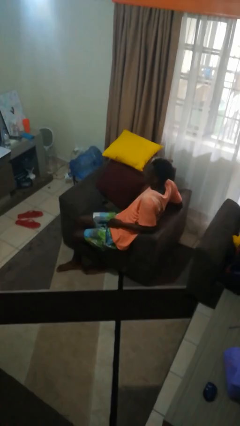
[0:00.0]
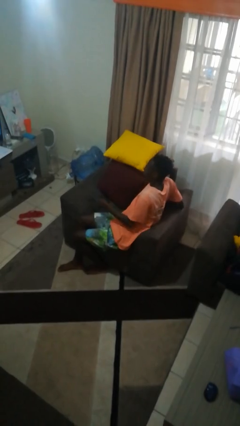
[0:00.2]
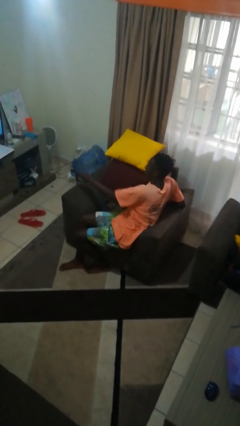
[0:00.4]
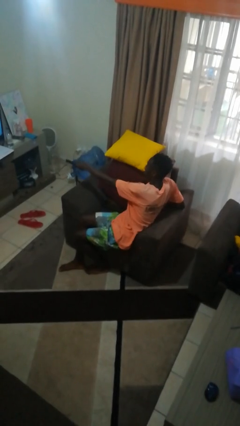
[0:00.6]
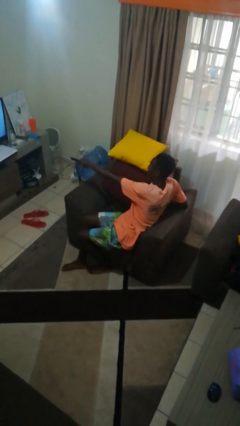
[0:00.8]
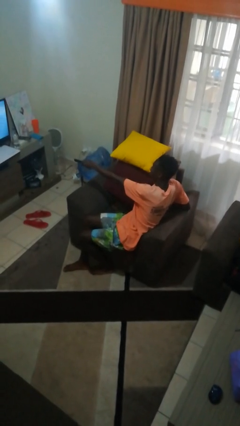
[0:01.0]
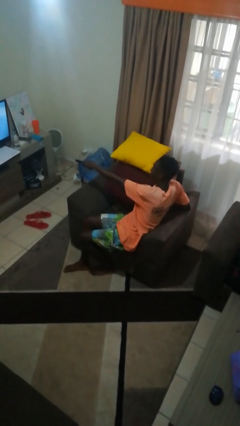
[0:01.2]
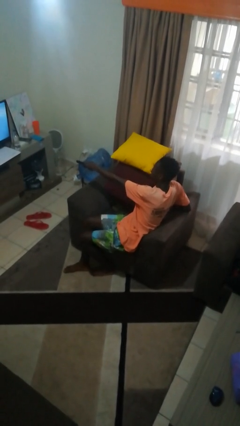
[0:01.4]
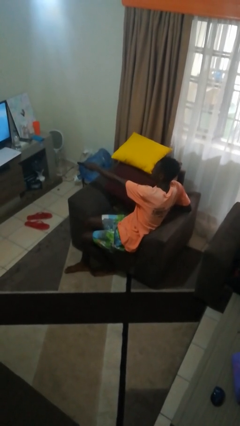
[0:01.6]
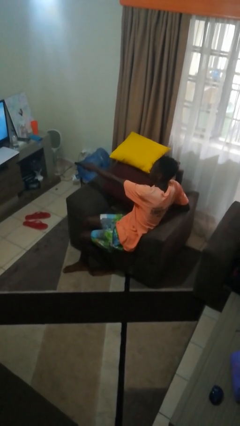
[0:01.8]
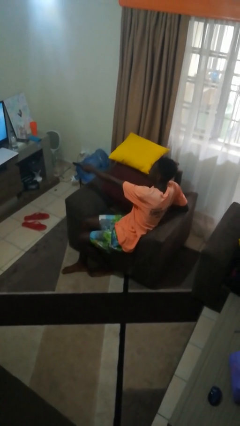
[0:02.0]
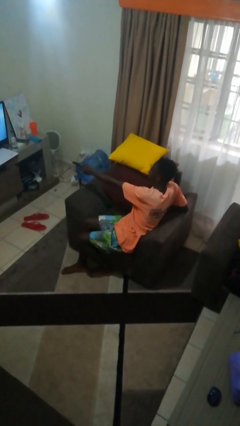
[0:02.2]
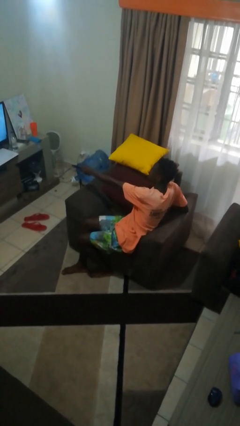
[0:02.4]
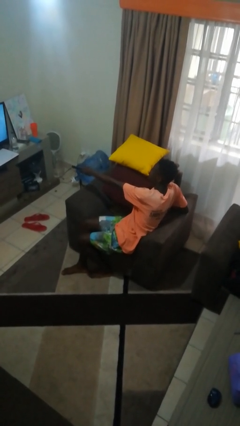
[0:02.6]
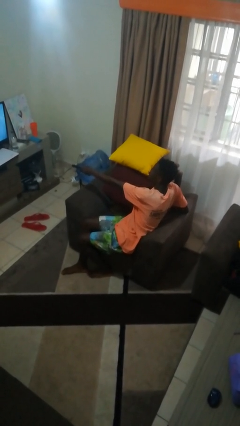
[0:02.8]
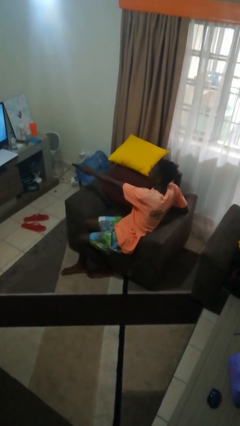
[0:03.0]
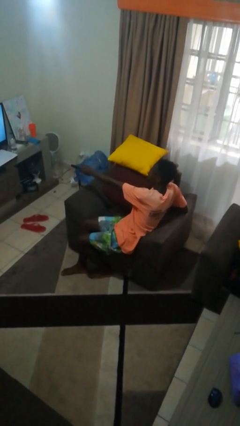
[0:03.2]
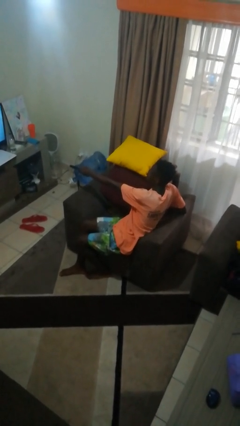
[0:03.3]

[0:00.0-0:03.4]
person uses television remote

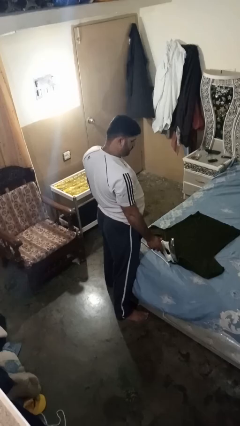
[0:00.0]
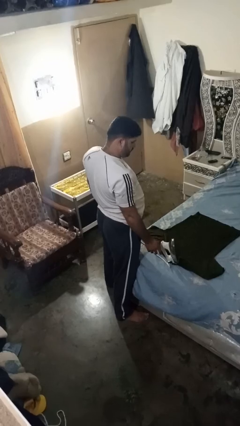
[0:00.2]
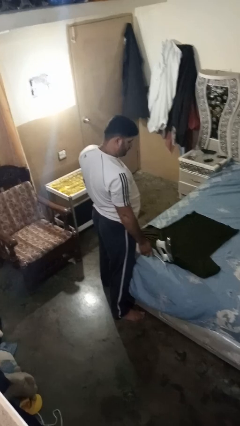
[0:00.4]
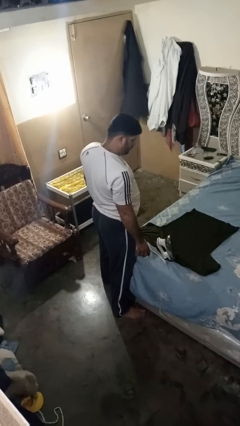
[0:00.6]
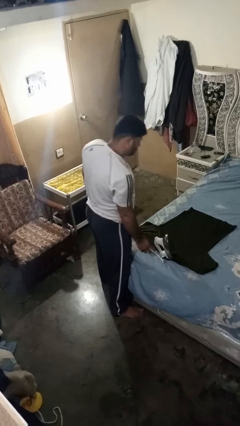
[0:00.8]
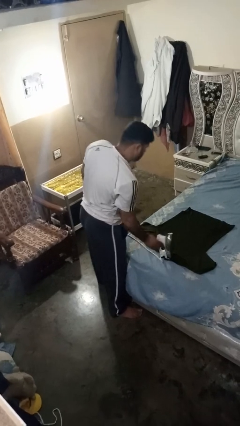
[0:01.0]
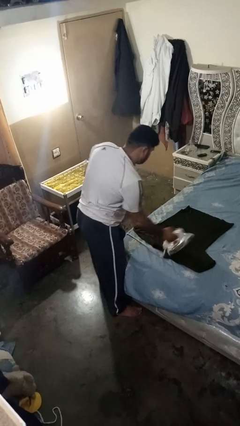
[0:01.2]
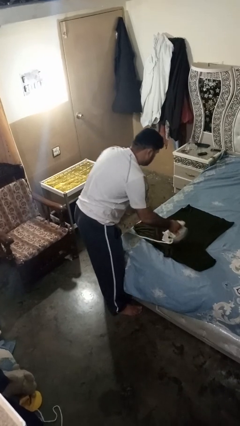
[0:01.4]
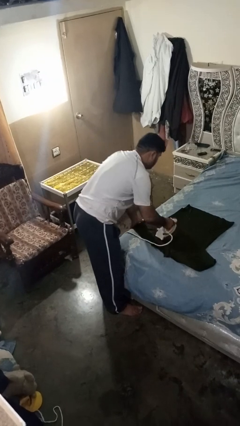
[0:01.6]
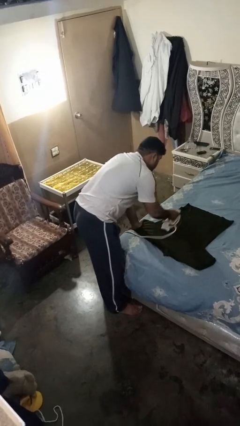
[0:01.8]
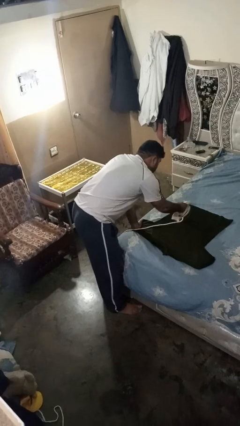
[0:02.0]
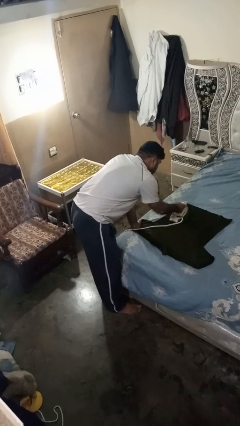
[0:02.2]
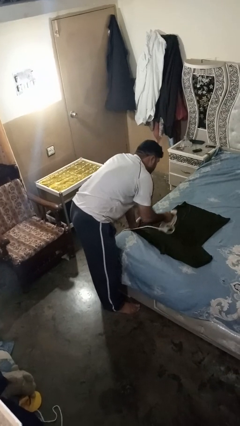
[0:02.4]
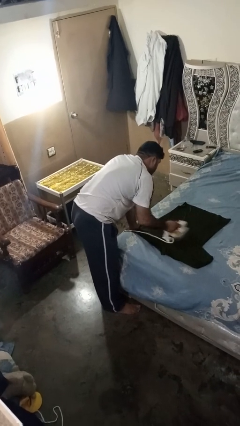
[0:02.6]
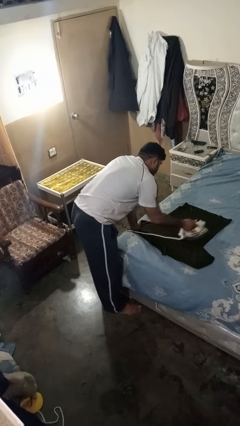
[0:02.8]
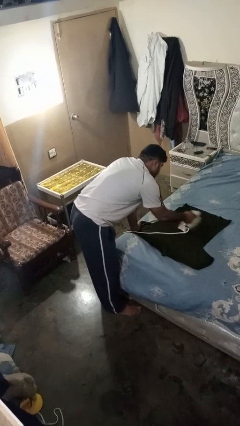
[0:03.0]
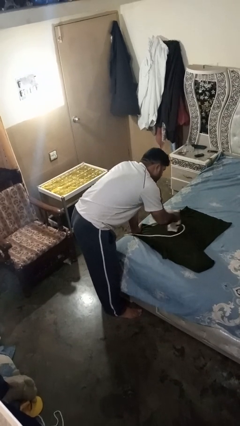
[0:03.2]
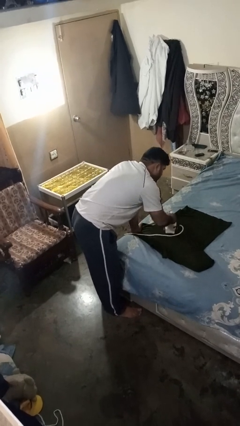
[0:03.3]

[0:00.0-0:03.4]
person irons clothes

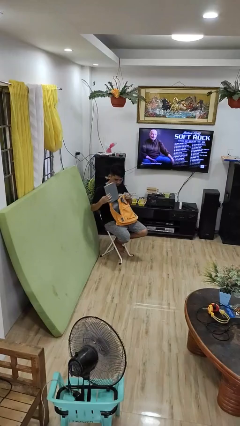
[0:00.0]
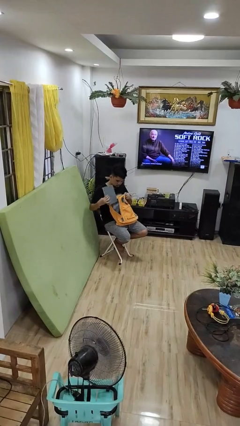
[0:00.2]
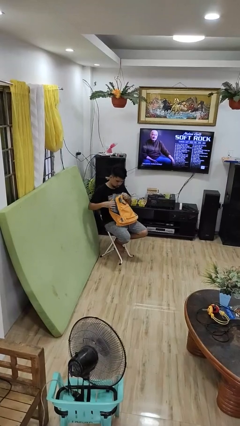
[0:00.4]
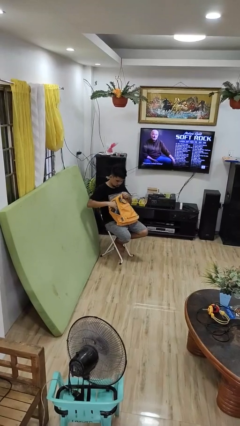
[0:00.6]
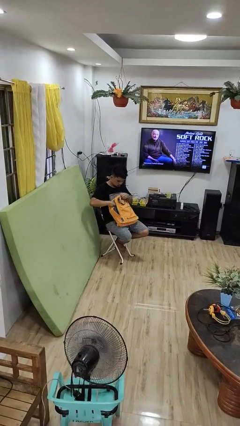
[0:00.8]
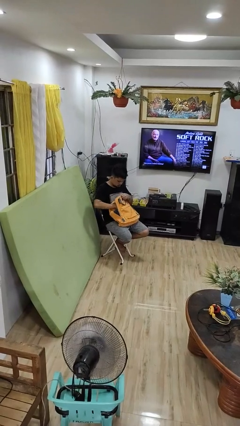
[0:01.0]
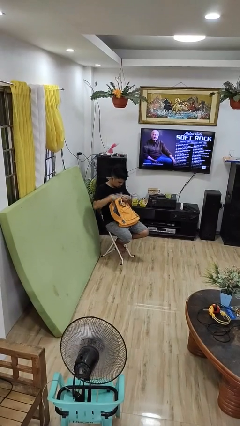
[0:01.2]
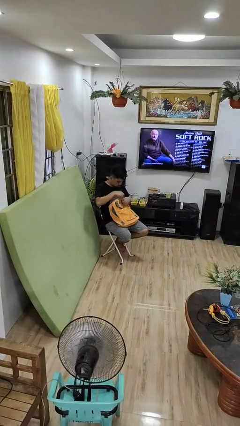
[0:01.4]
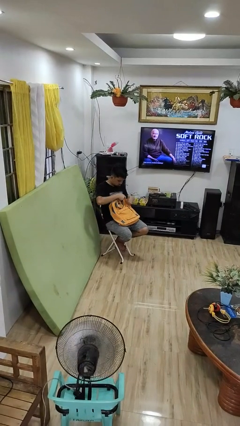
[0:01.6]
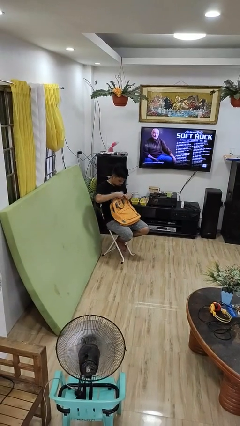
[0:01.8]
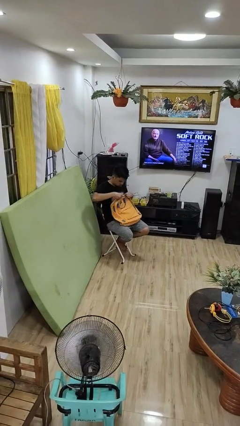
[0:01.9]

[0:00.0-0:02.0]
person puts object into backpack

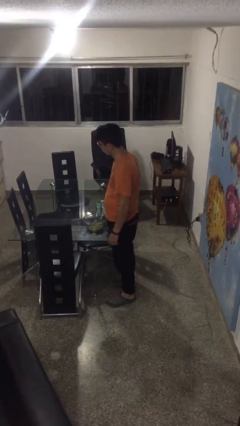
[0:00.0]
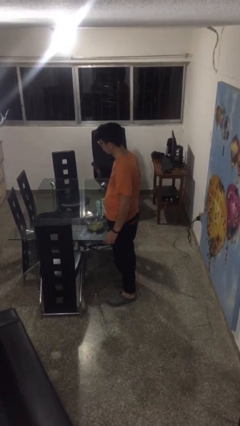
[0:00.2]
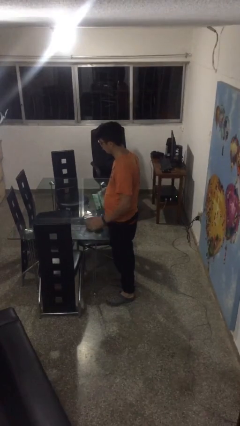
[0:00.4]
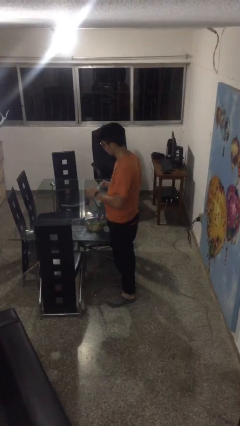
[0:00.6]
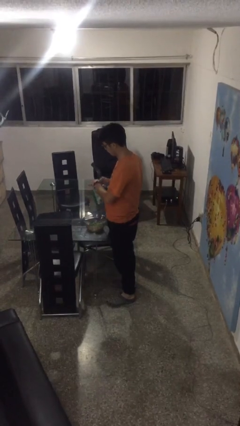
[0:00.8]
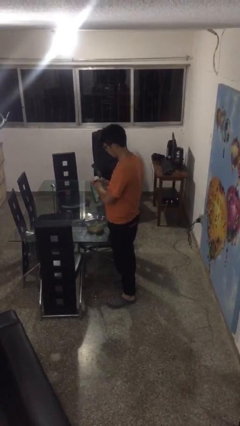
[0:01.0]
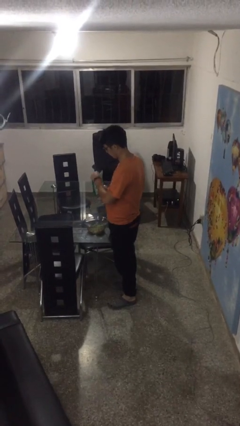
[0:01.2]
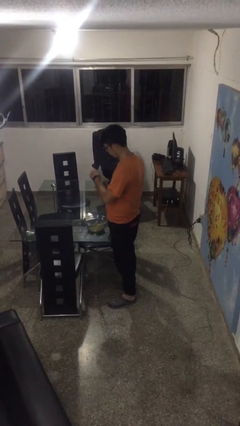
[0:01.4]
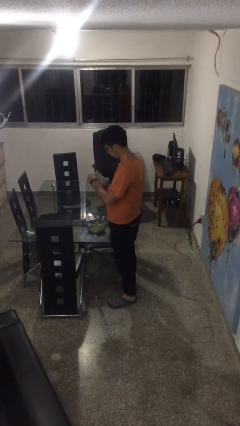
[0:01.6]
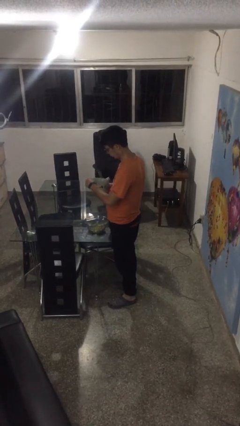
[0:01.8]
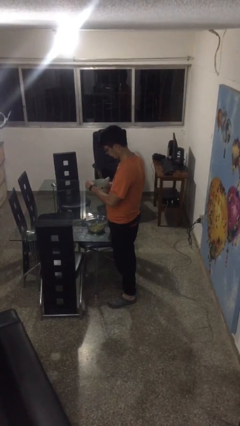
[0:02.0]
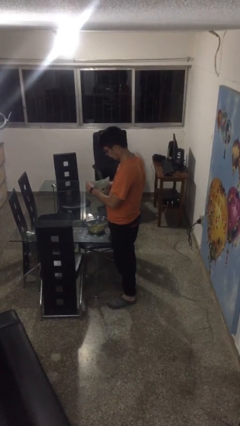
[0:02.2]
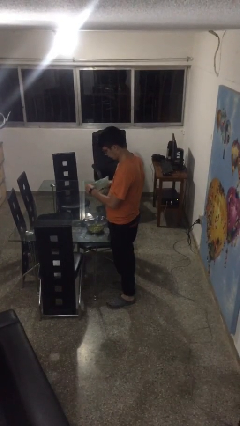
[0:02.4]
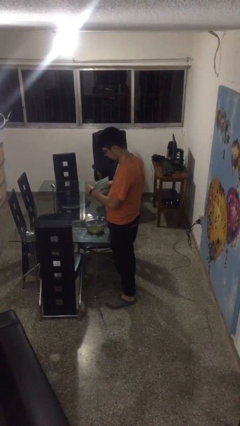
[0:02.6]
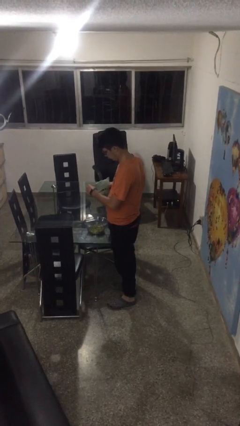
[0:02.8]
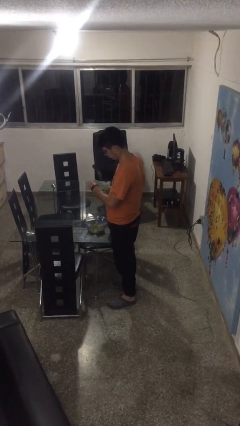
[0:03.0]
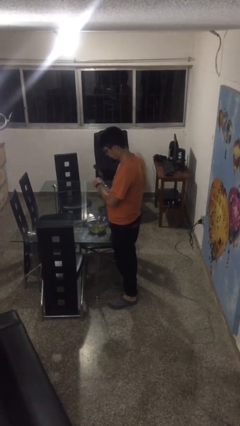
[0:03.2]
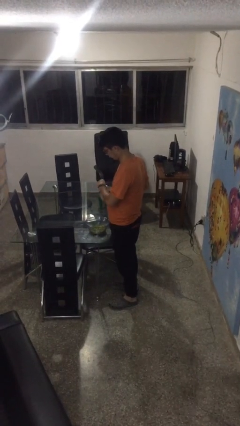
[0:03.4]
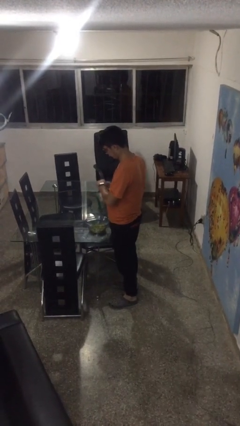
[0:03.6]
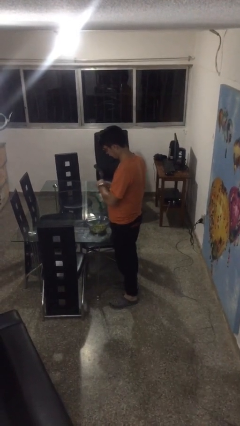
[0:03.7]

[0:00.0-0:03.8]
person pours into bowl

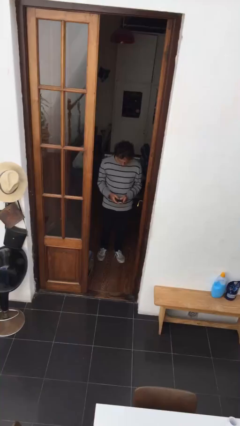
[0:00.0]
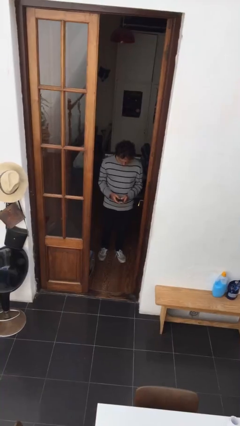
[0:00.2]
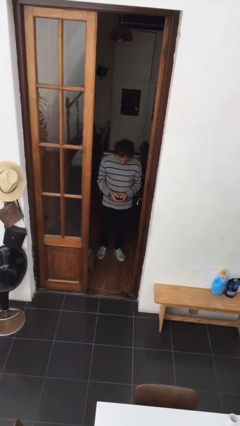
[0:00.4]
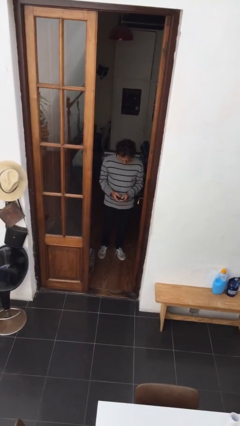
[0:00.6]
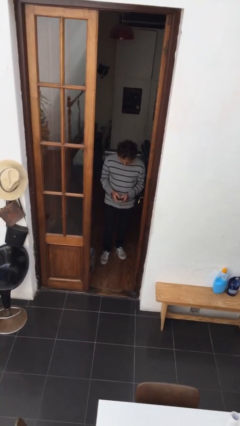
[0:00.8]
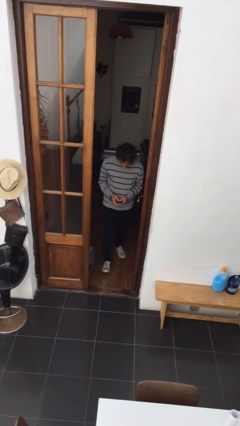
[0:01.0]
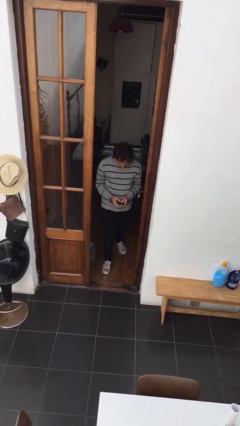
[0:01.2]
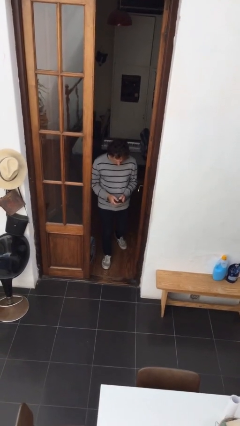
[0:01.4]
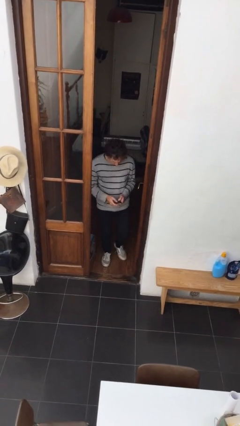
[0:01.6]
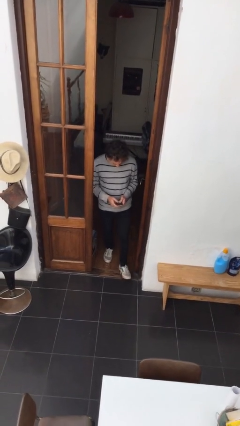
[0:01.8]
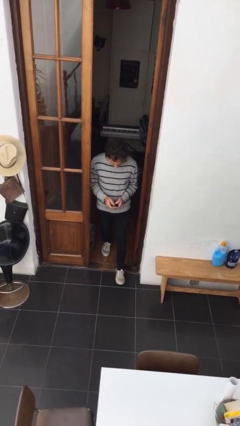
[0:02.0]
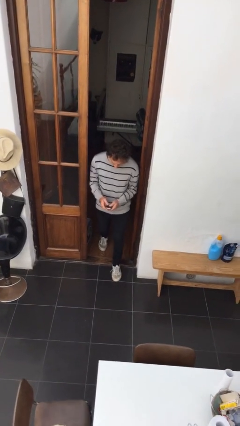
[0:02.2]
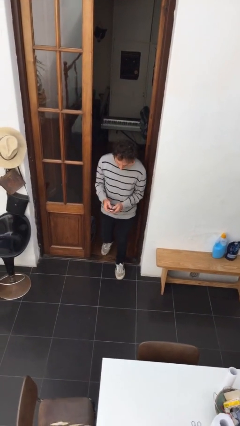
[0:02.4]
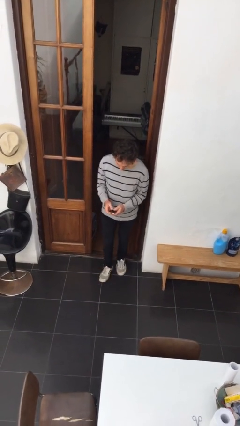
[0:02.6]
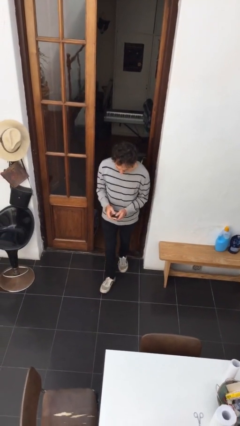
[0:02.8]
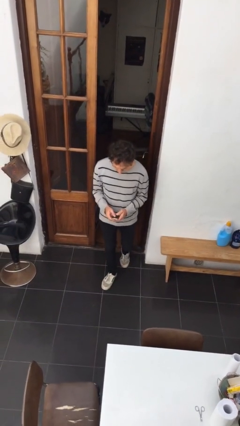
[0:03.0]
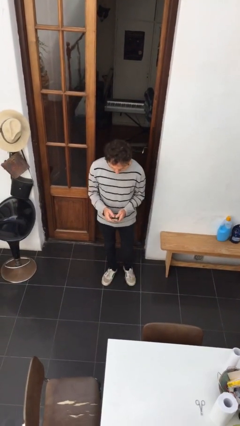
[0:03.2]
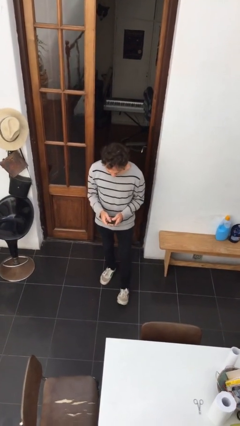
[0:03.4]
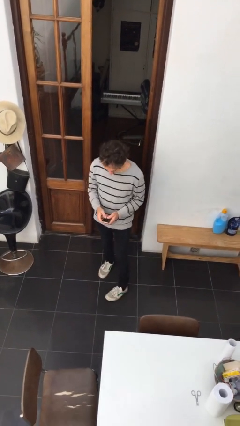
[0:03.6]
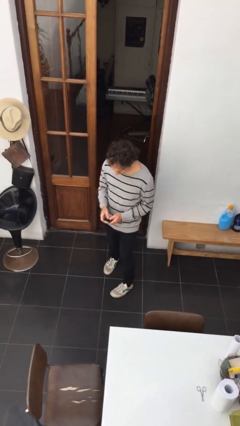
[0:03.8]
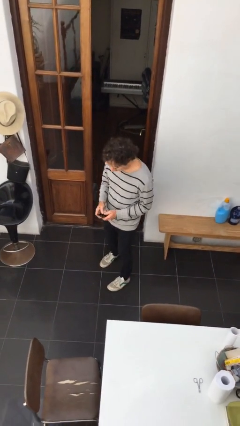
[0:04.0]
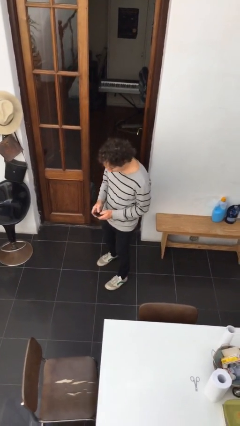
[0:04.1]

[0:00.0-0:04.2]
person enters scene through structure

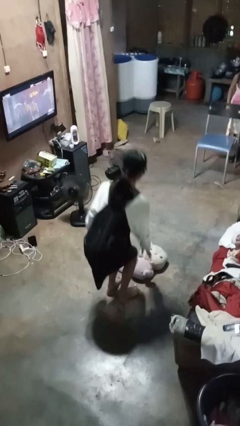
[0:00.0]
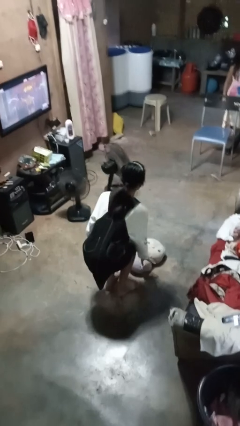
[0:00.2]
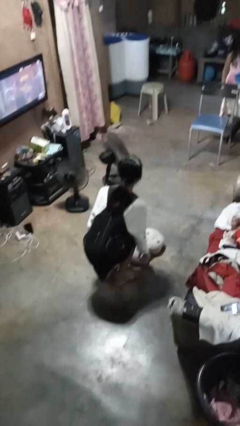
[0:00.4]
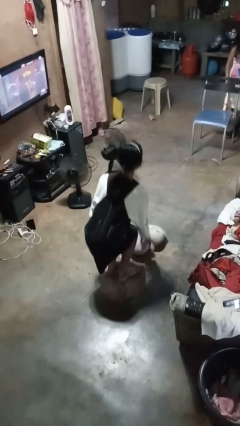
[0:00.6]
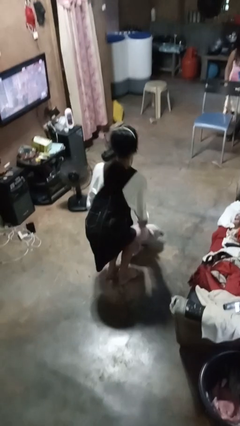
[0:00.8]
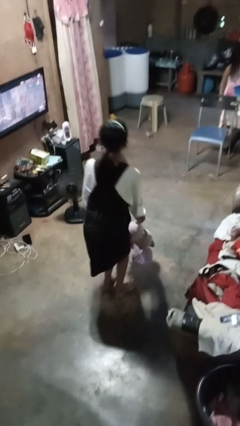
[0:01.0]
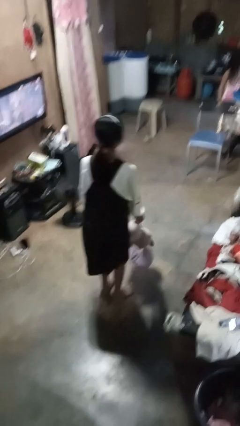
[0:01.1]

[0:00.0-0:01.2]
person picks up object from floor
